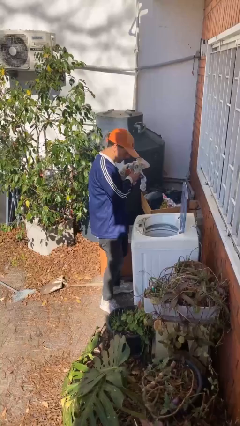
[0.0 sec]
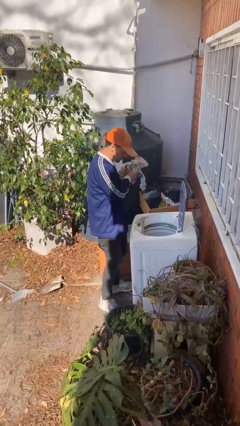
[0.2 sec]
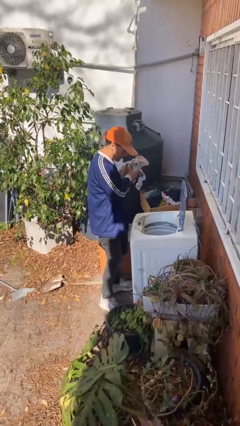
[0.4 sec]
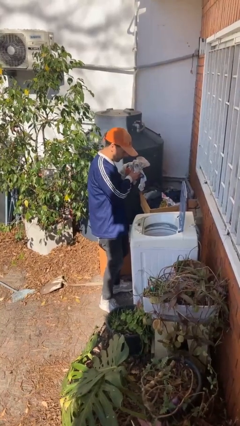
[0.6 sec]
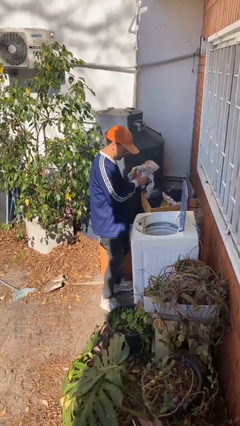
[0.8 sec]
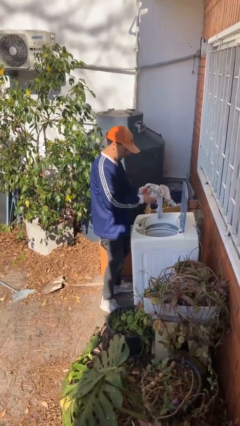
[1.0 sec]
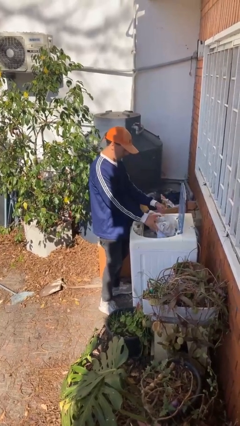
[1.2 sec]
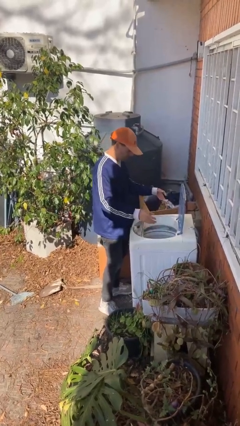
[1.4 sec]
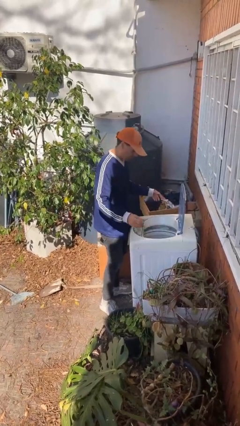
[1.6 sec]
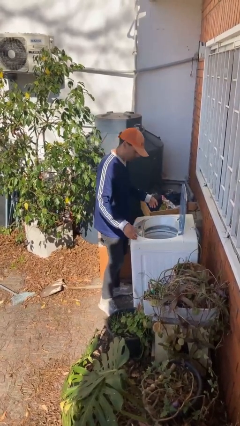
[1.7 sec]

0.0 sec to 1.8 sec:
person loads clotheswasher

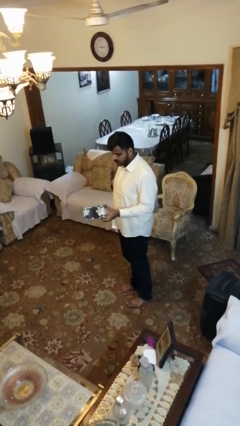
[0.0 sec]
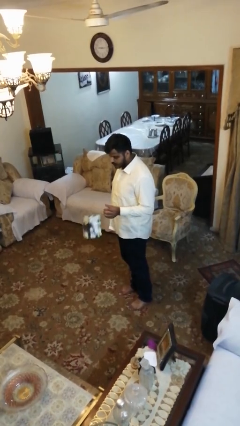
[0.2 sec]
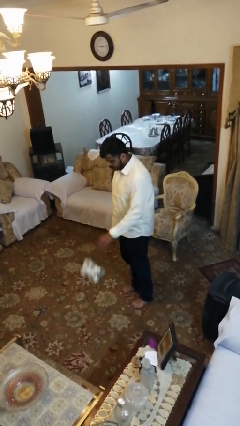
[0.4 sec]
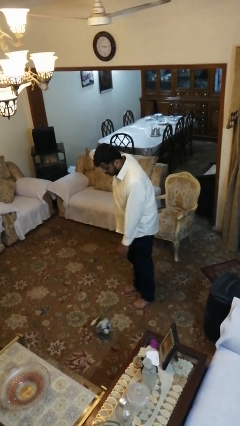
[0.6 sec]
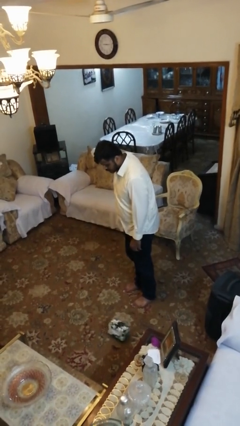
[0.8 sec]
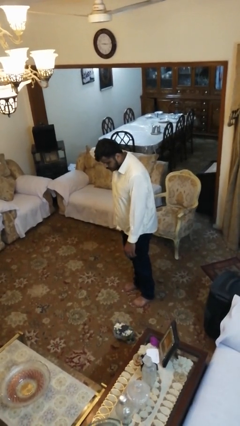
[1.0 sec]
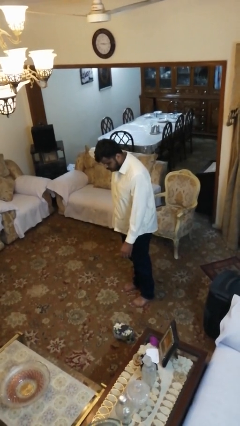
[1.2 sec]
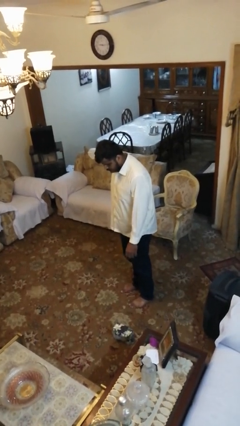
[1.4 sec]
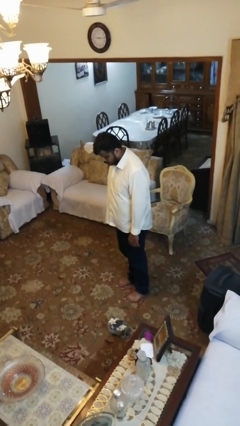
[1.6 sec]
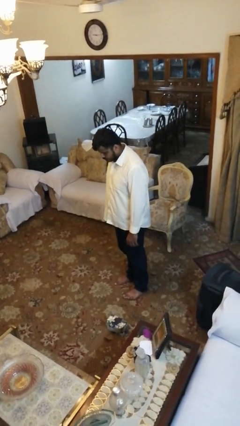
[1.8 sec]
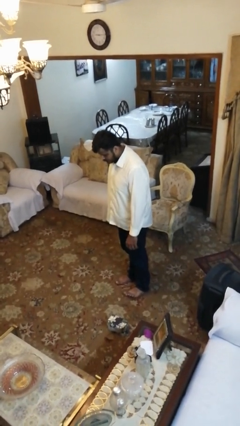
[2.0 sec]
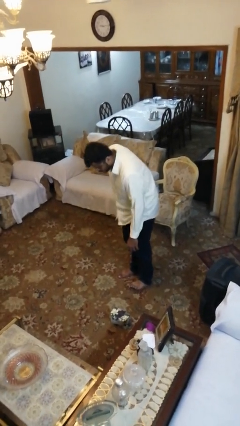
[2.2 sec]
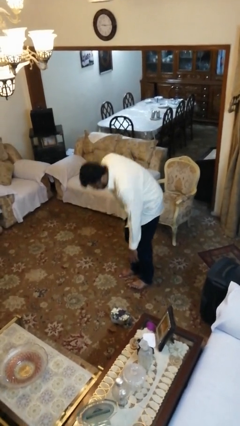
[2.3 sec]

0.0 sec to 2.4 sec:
person drops object

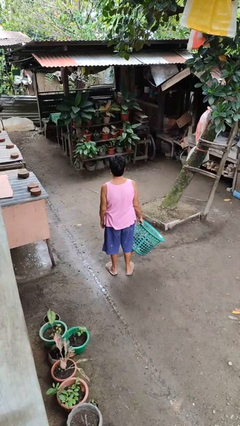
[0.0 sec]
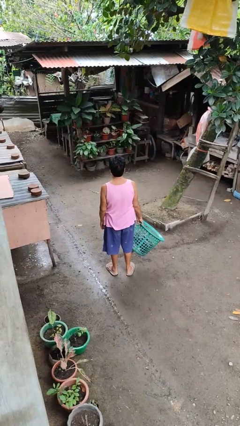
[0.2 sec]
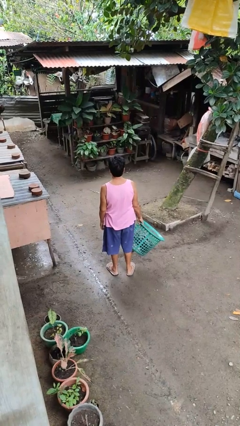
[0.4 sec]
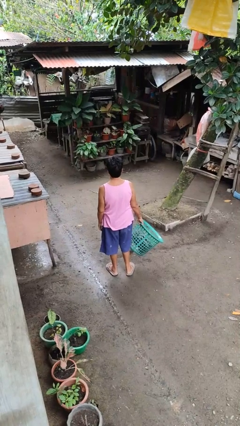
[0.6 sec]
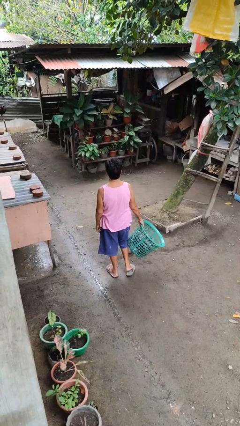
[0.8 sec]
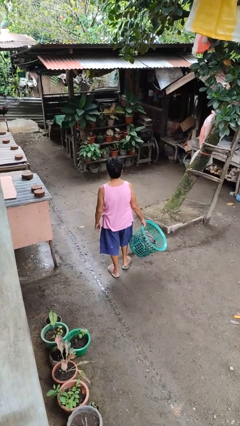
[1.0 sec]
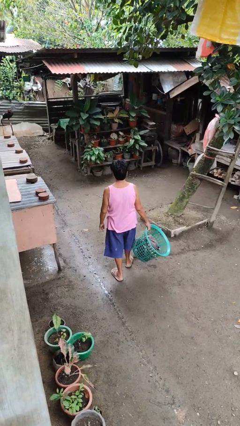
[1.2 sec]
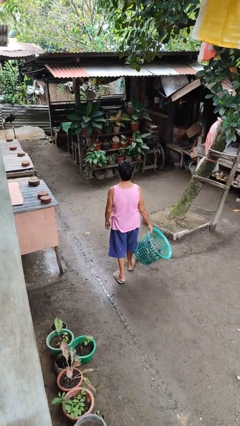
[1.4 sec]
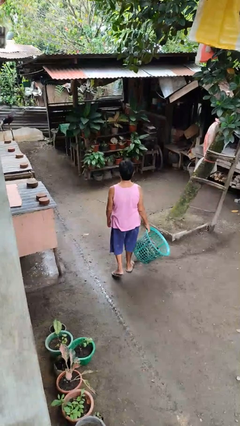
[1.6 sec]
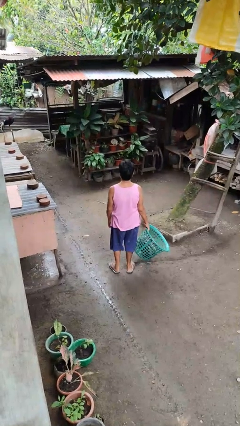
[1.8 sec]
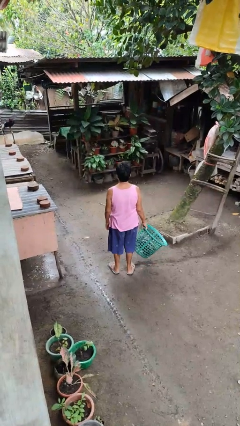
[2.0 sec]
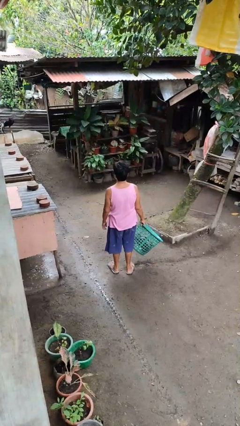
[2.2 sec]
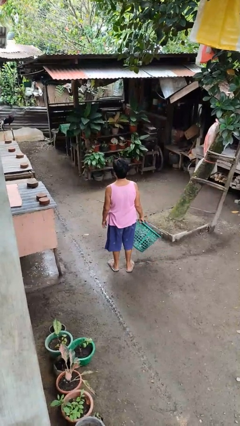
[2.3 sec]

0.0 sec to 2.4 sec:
person carries laundry basket

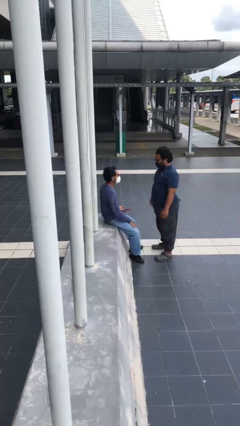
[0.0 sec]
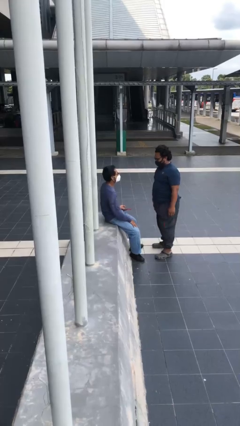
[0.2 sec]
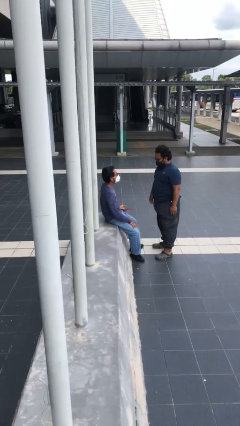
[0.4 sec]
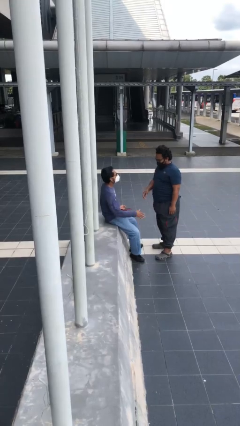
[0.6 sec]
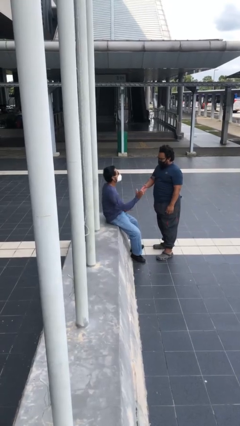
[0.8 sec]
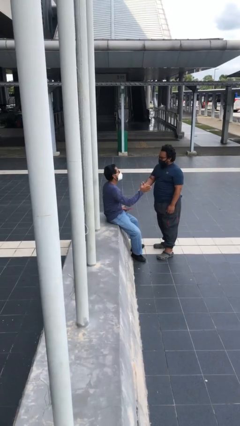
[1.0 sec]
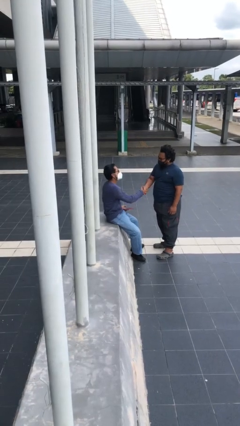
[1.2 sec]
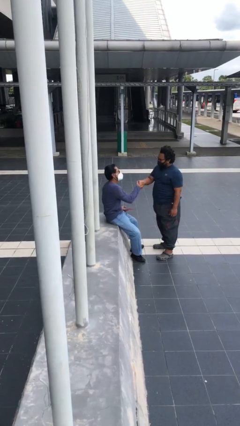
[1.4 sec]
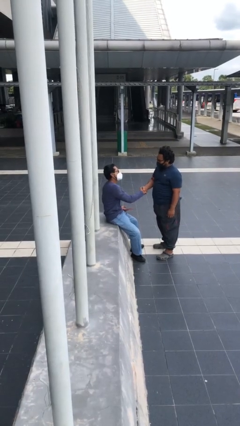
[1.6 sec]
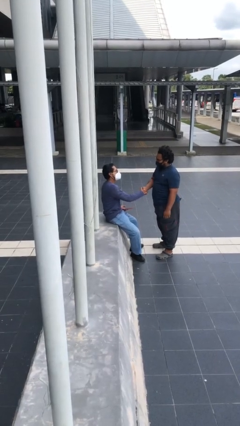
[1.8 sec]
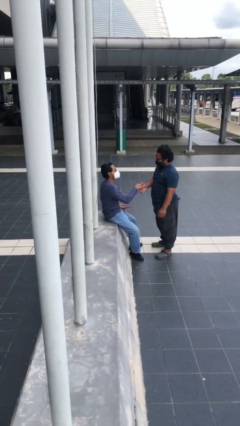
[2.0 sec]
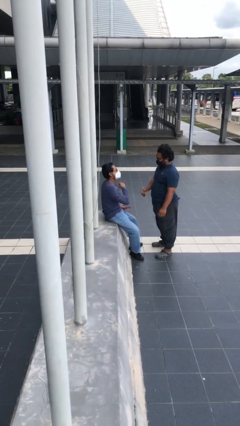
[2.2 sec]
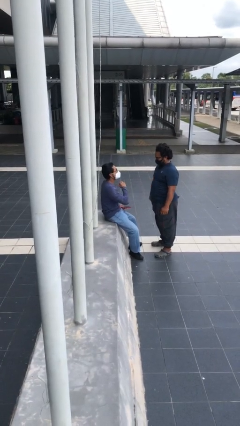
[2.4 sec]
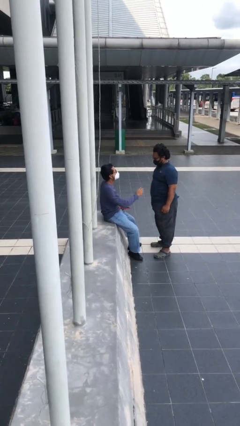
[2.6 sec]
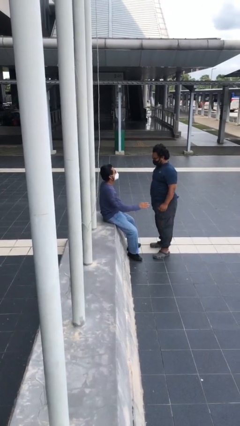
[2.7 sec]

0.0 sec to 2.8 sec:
person shakes hand

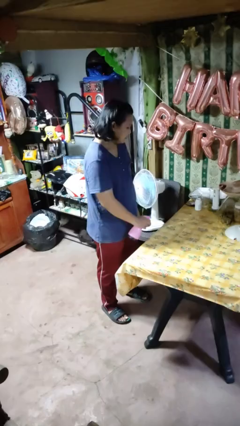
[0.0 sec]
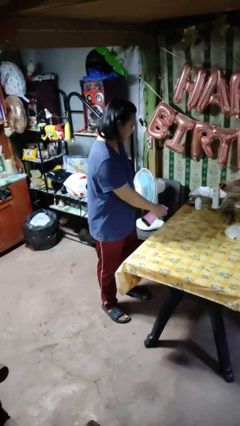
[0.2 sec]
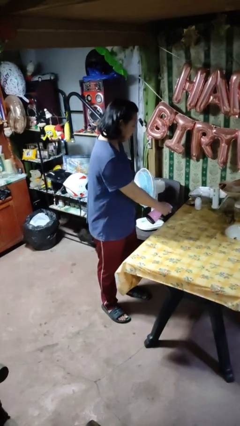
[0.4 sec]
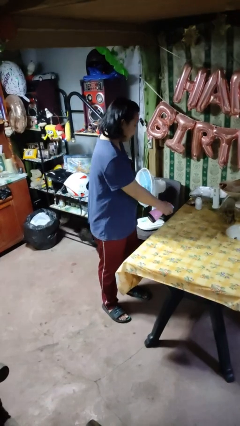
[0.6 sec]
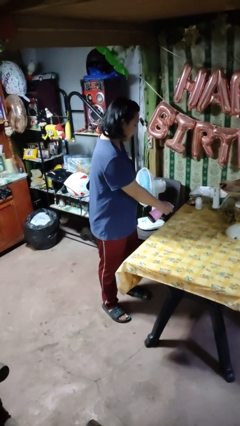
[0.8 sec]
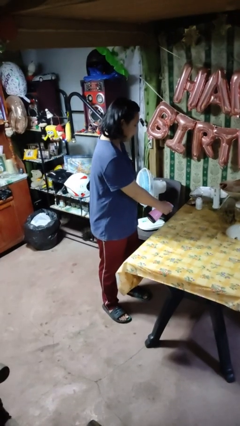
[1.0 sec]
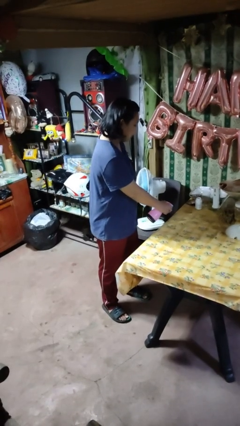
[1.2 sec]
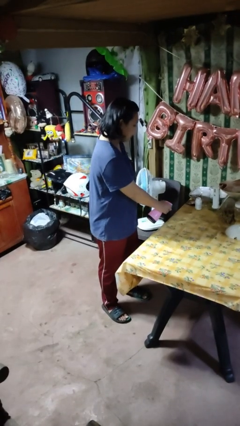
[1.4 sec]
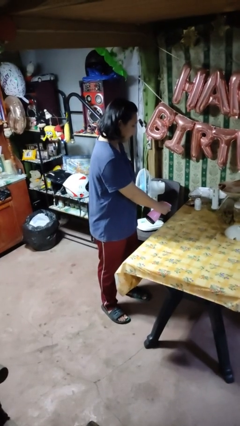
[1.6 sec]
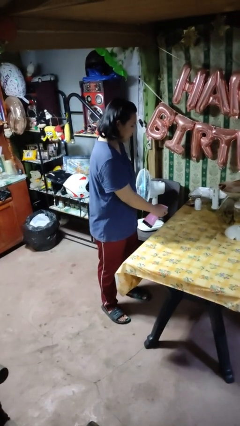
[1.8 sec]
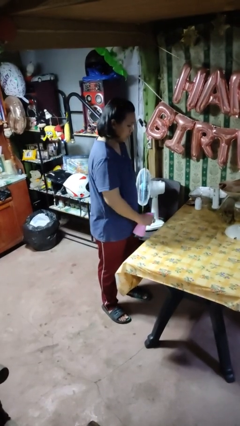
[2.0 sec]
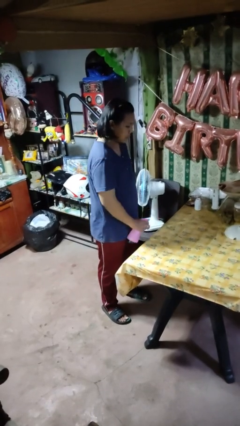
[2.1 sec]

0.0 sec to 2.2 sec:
person sprays from bottle

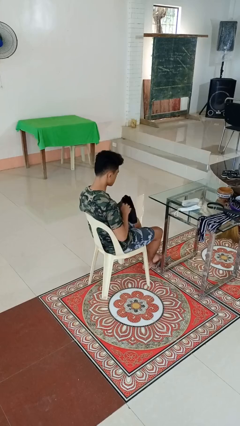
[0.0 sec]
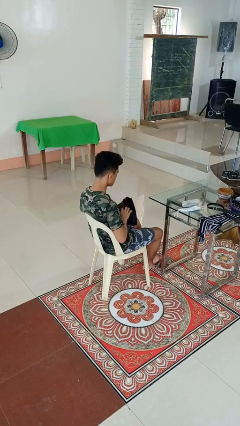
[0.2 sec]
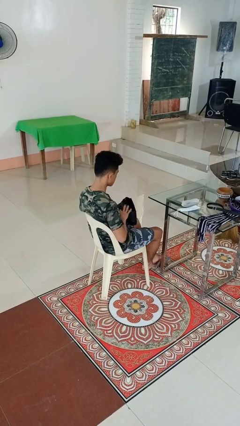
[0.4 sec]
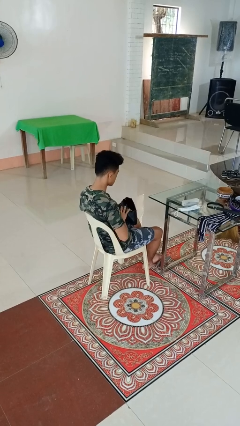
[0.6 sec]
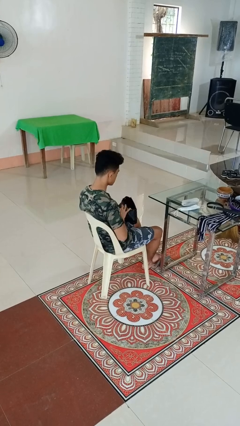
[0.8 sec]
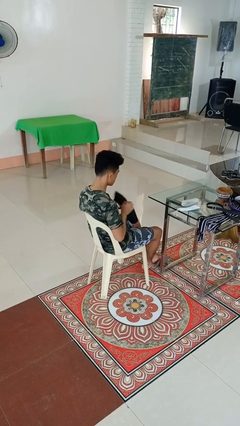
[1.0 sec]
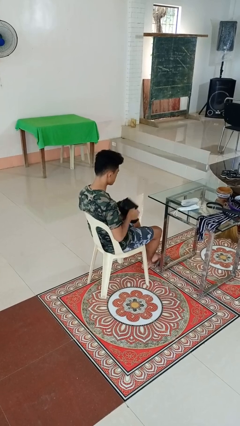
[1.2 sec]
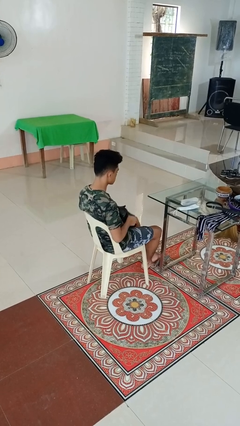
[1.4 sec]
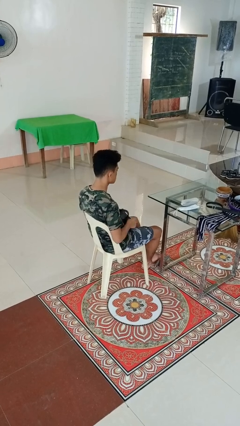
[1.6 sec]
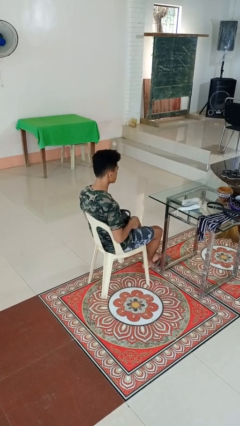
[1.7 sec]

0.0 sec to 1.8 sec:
person puts object into purse

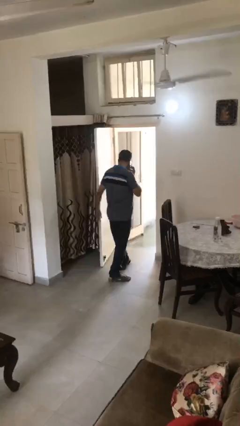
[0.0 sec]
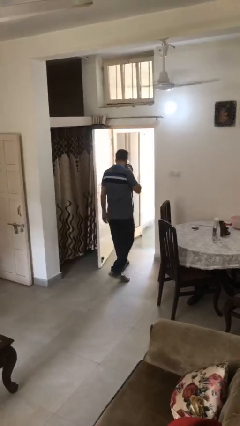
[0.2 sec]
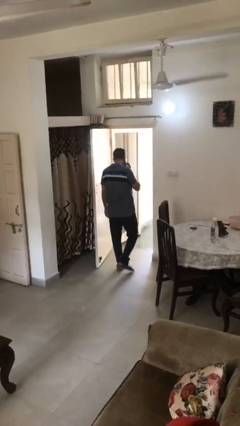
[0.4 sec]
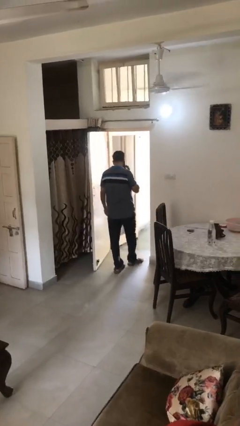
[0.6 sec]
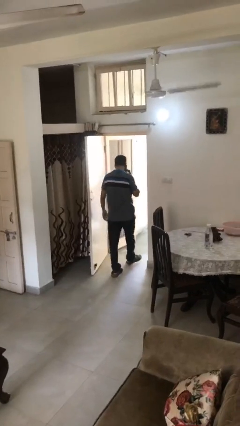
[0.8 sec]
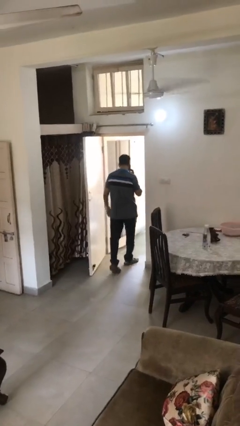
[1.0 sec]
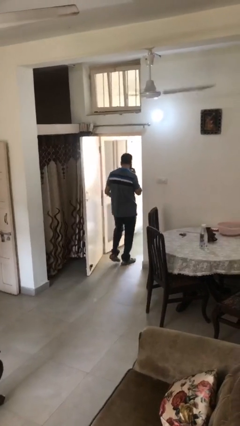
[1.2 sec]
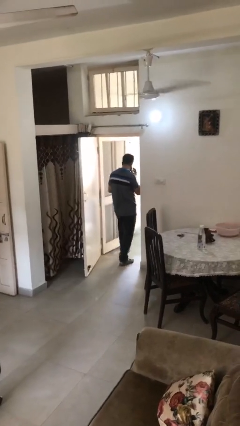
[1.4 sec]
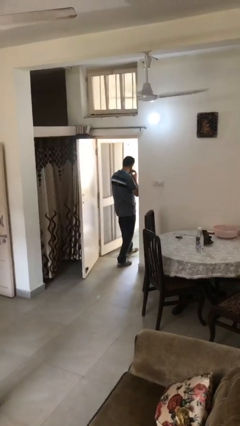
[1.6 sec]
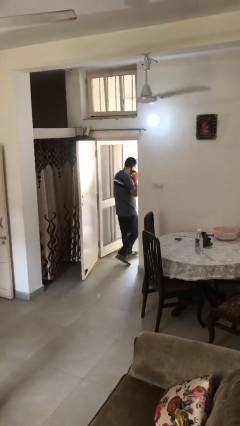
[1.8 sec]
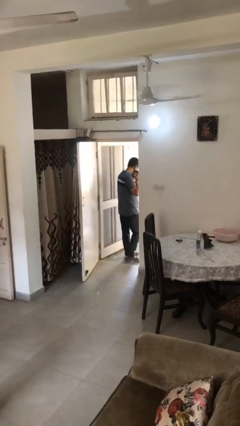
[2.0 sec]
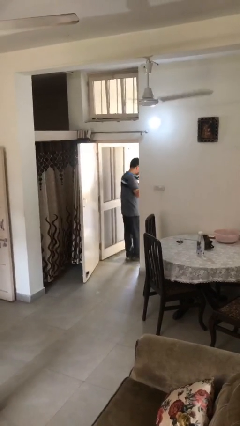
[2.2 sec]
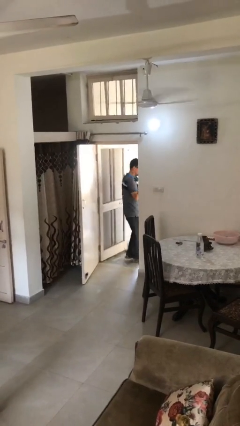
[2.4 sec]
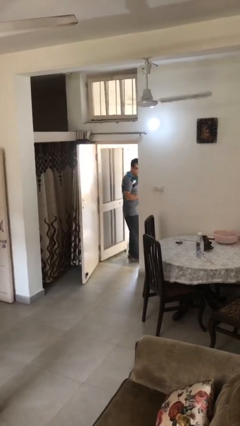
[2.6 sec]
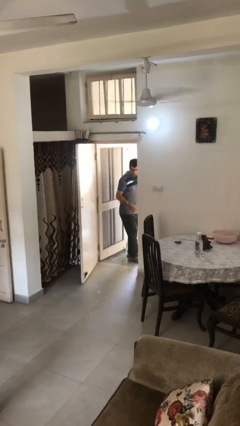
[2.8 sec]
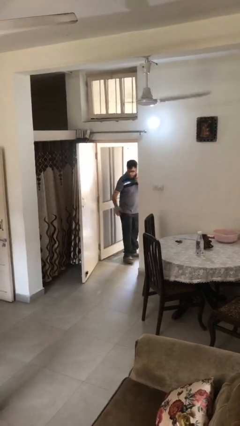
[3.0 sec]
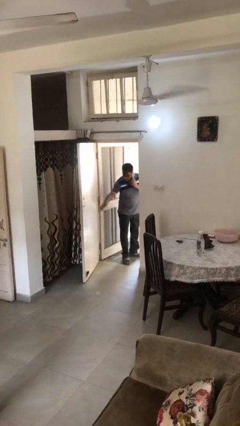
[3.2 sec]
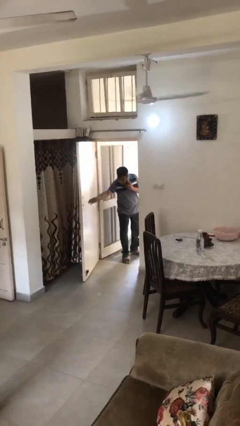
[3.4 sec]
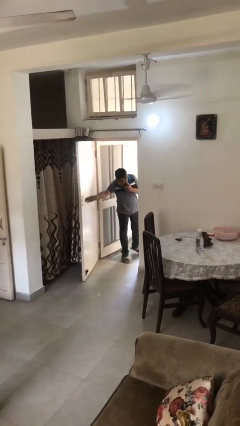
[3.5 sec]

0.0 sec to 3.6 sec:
person exits scene through structure
